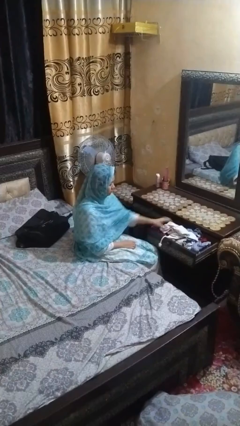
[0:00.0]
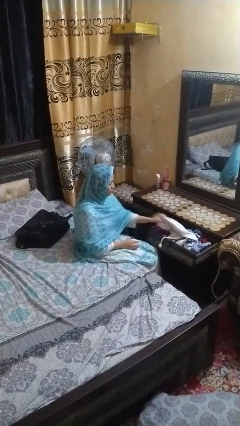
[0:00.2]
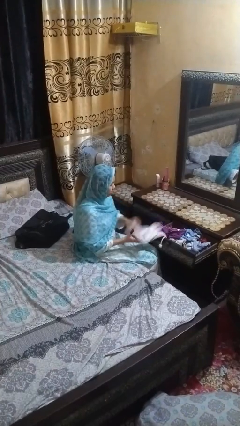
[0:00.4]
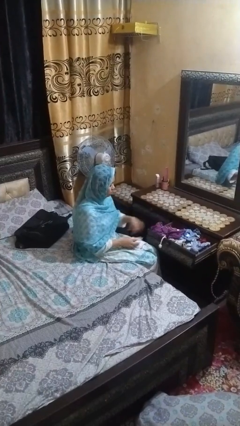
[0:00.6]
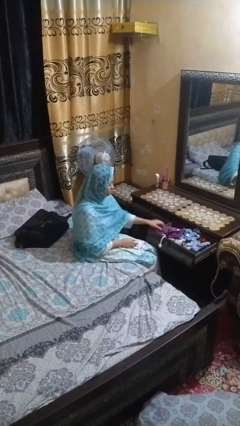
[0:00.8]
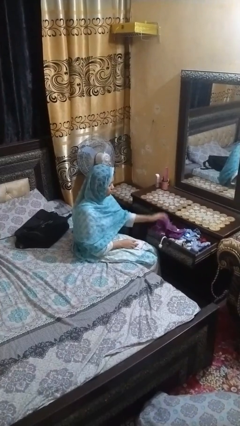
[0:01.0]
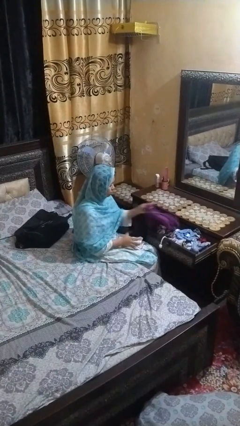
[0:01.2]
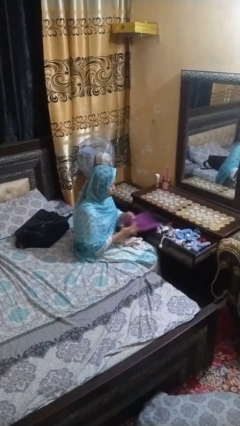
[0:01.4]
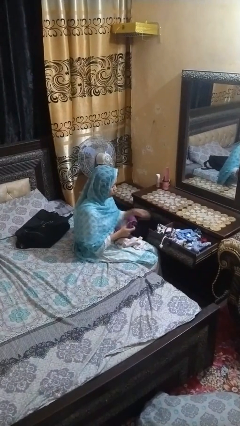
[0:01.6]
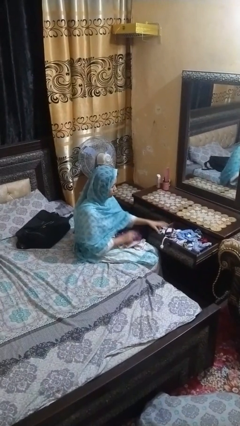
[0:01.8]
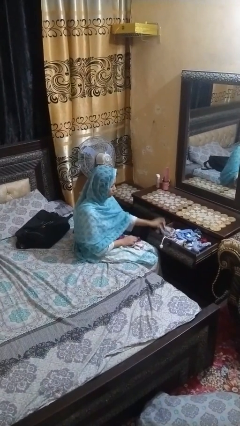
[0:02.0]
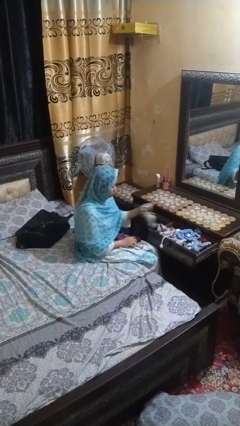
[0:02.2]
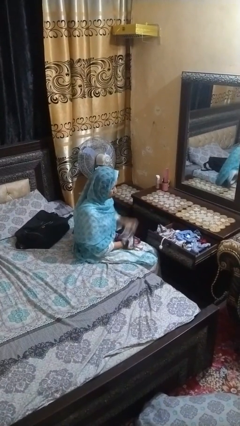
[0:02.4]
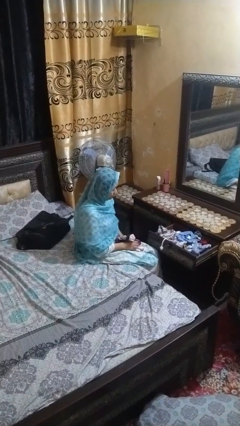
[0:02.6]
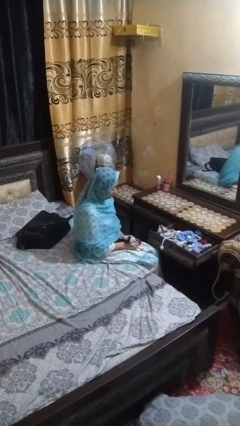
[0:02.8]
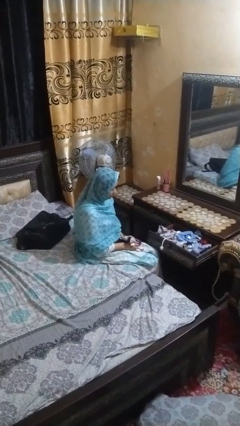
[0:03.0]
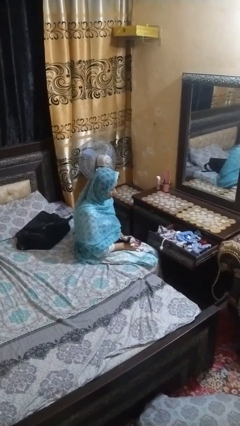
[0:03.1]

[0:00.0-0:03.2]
person takes clothes from dresser

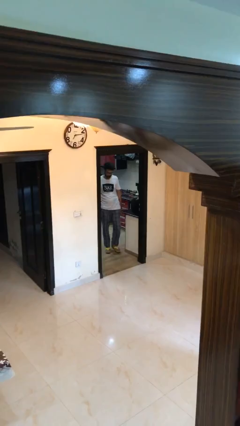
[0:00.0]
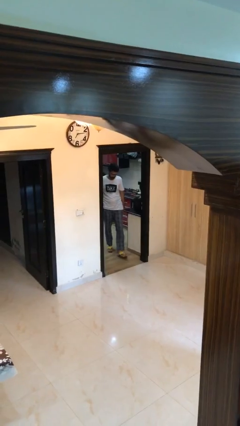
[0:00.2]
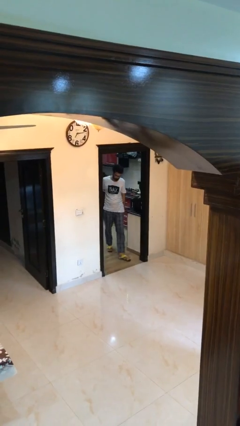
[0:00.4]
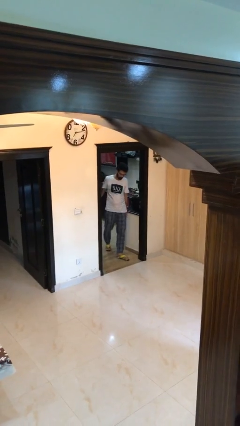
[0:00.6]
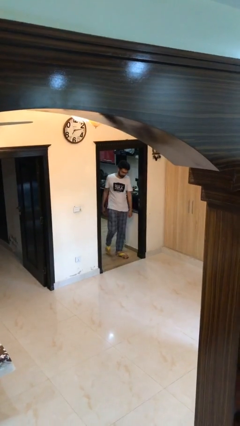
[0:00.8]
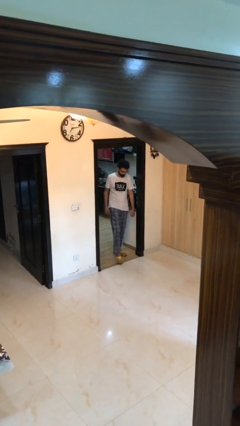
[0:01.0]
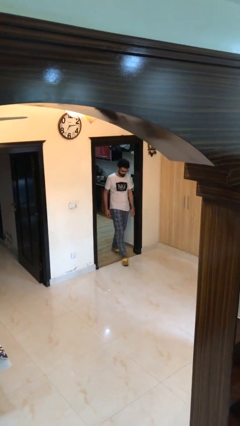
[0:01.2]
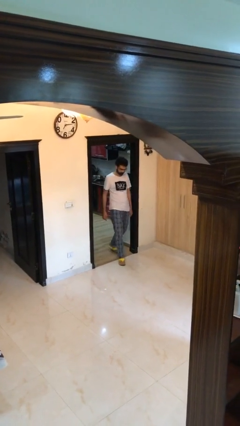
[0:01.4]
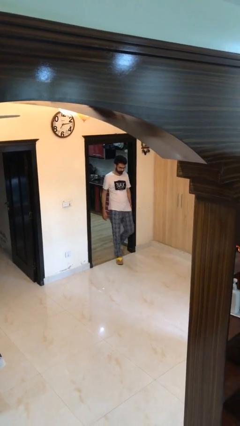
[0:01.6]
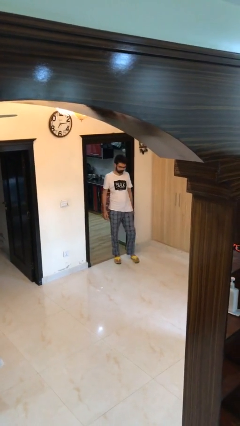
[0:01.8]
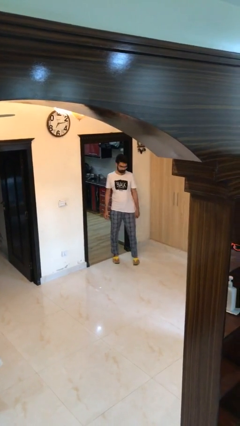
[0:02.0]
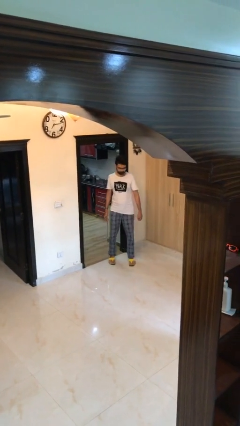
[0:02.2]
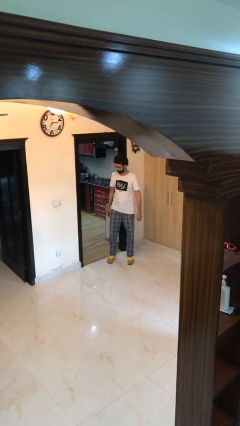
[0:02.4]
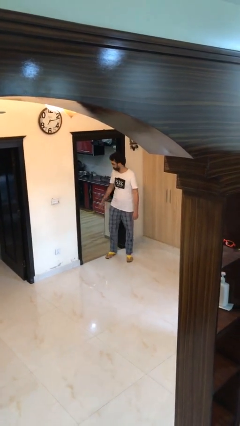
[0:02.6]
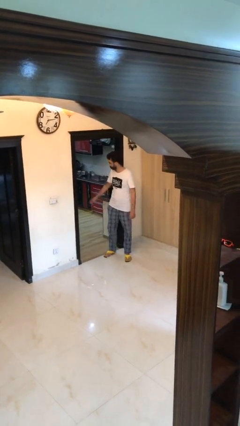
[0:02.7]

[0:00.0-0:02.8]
person enters scene through structure

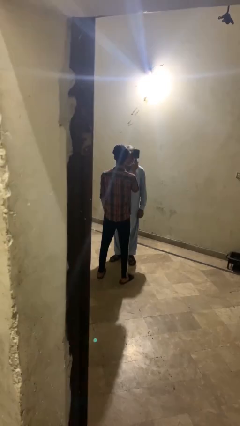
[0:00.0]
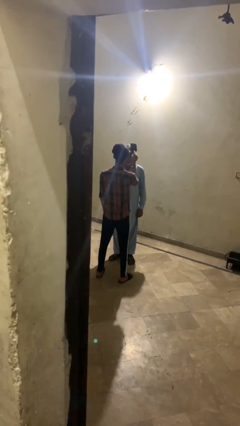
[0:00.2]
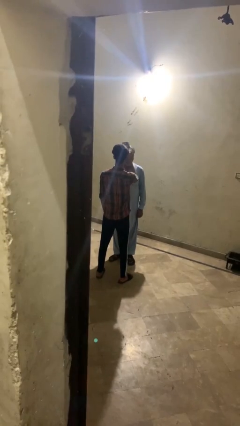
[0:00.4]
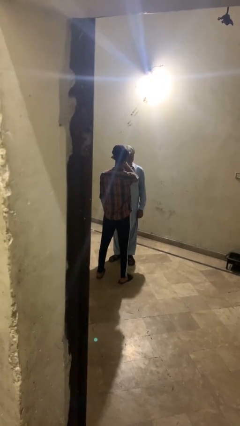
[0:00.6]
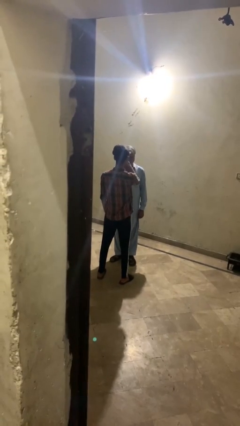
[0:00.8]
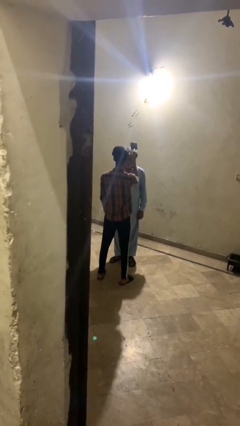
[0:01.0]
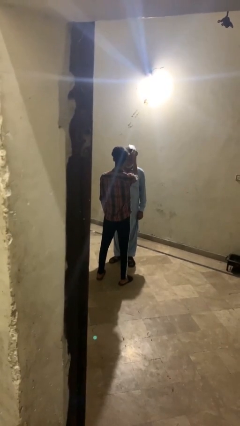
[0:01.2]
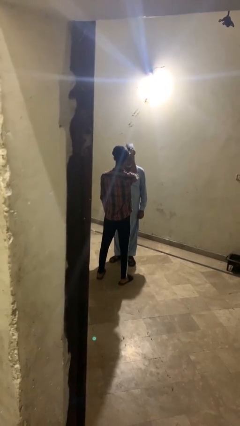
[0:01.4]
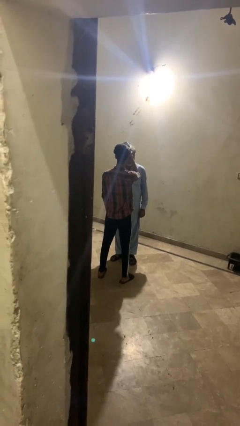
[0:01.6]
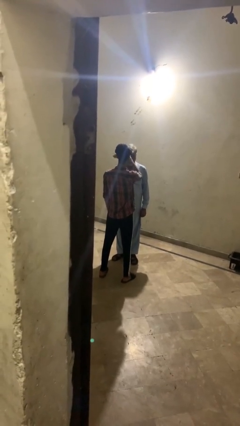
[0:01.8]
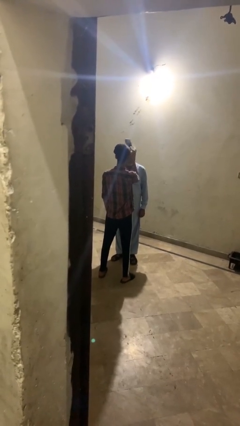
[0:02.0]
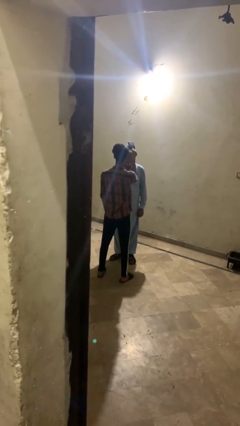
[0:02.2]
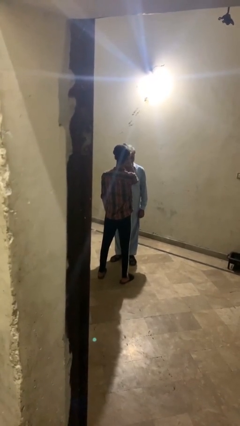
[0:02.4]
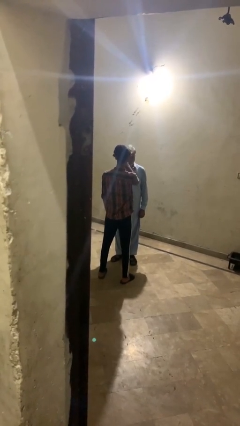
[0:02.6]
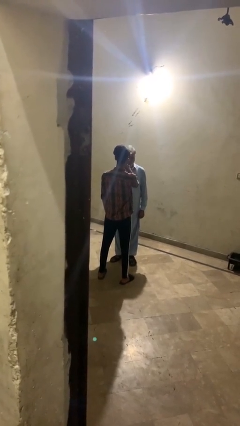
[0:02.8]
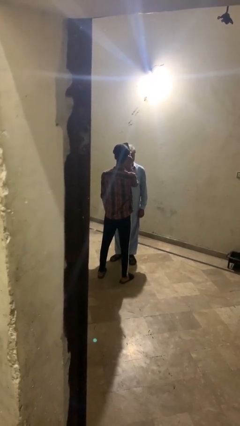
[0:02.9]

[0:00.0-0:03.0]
person brushes hair of person

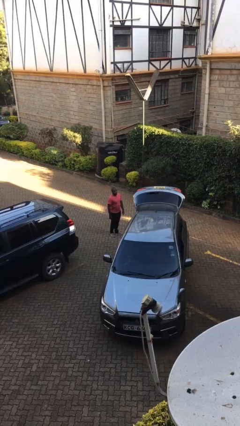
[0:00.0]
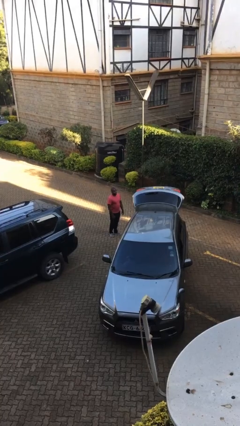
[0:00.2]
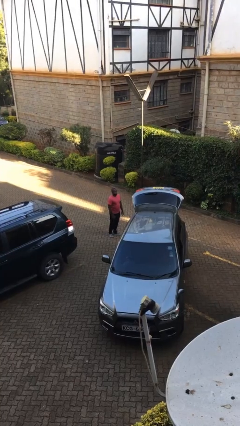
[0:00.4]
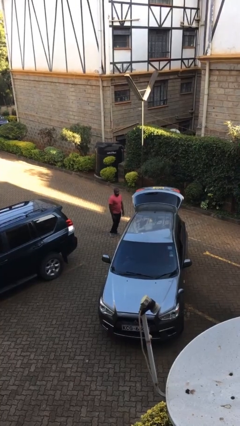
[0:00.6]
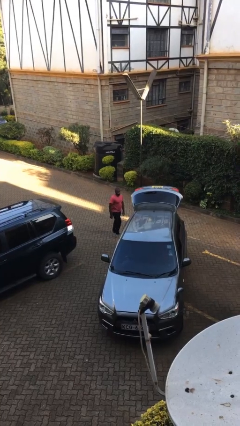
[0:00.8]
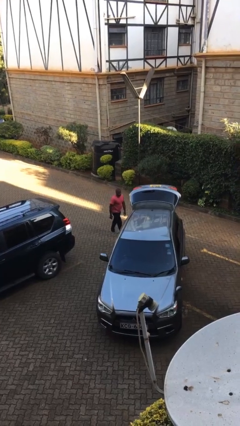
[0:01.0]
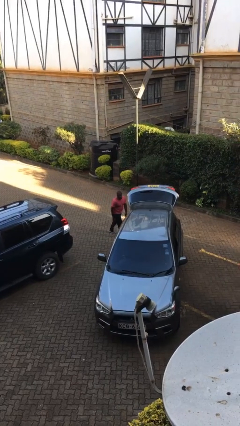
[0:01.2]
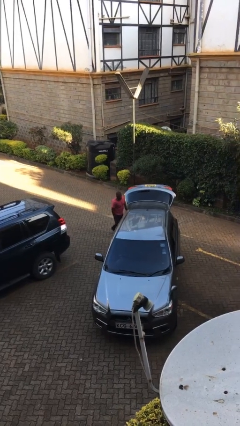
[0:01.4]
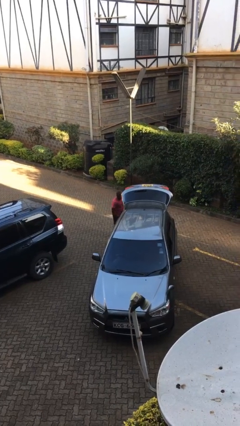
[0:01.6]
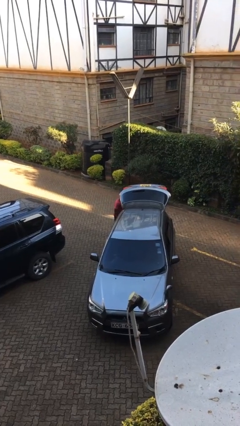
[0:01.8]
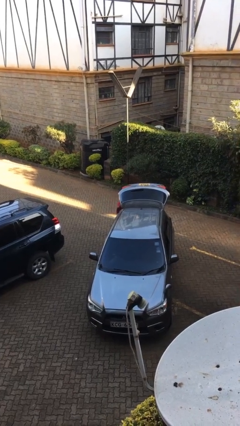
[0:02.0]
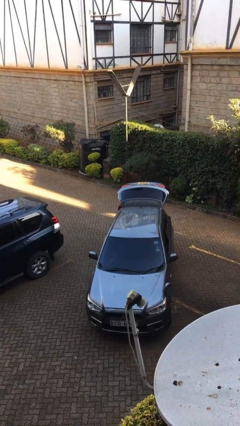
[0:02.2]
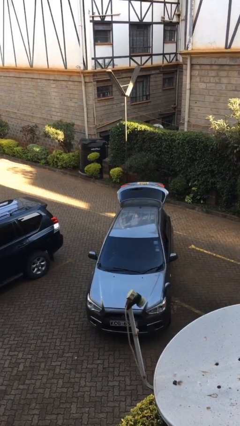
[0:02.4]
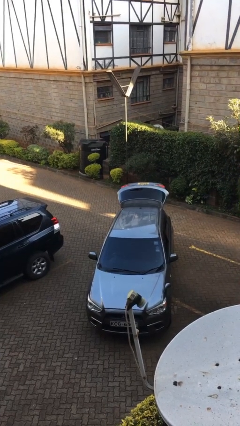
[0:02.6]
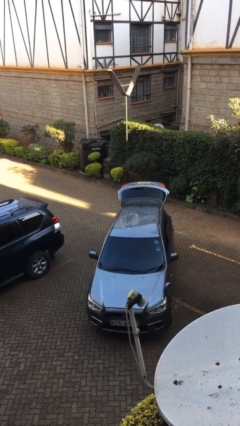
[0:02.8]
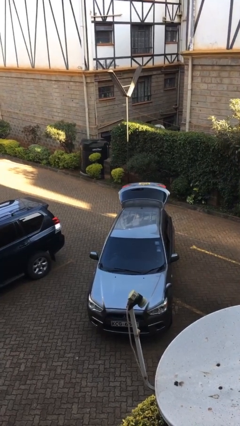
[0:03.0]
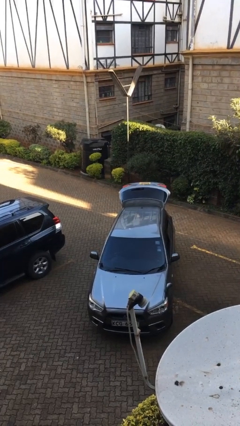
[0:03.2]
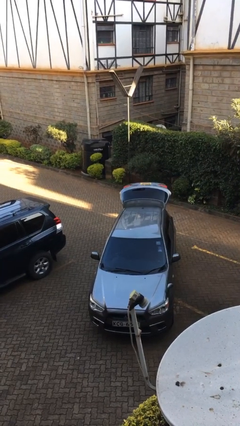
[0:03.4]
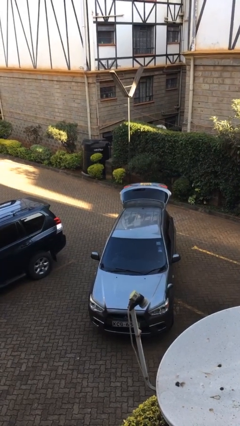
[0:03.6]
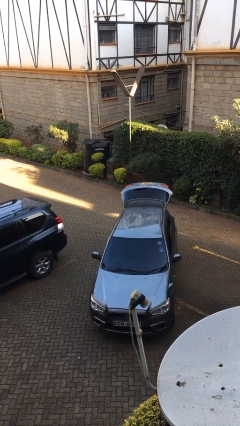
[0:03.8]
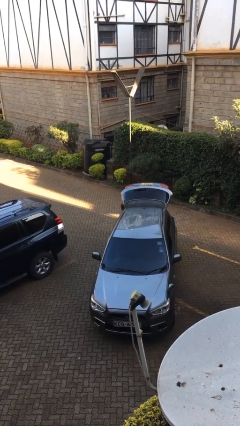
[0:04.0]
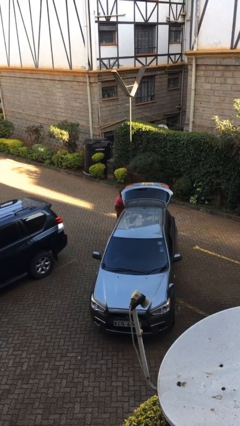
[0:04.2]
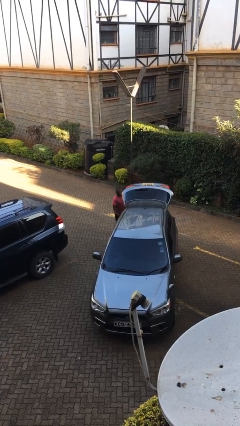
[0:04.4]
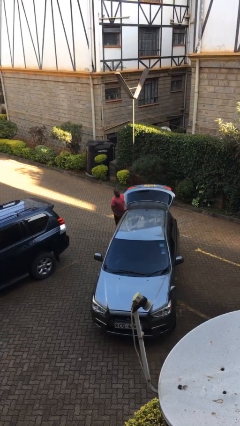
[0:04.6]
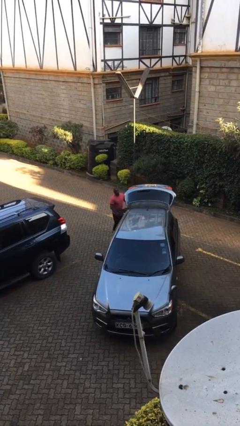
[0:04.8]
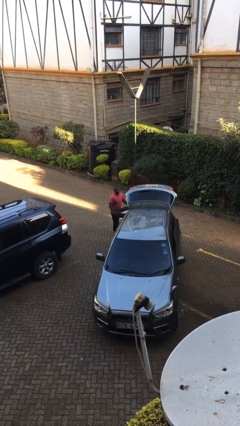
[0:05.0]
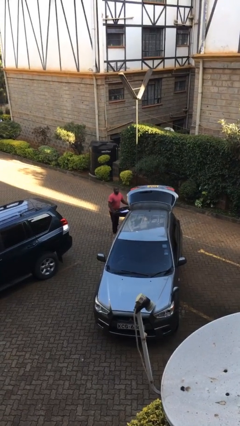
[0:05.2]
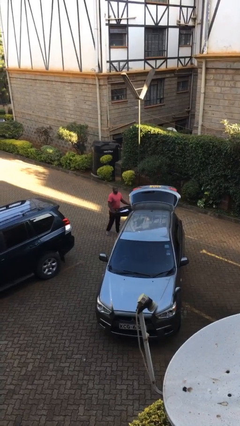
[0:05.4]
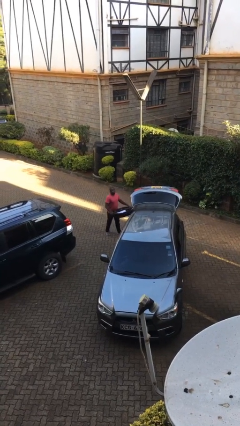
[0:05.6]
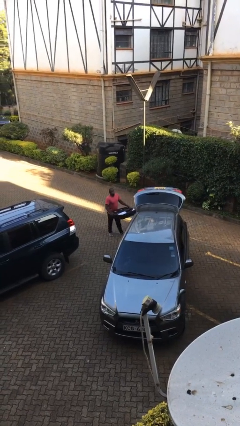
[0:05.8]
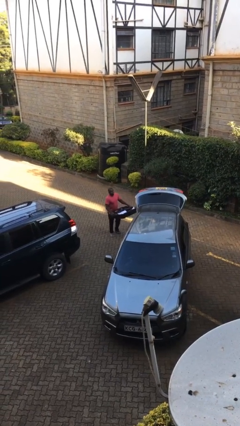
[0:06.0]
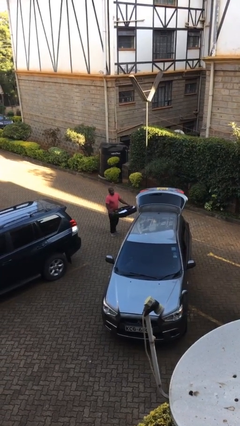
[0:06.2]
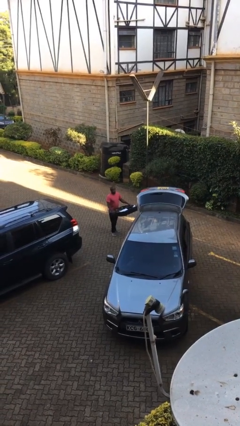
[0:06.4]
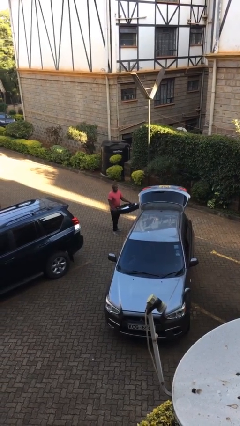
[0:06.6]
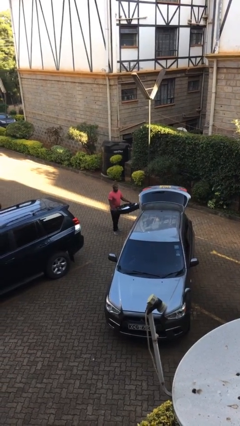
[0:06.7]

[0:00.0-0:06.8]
person unloads car

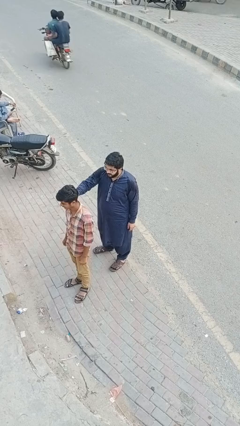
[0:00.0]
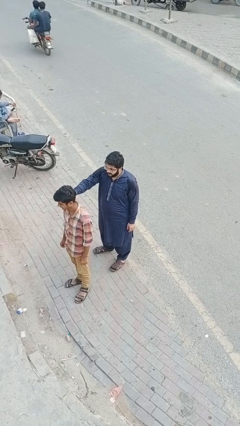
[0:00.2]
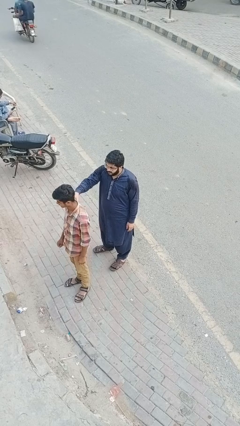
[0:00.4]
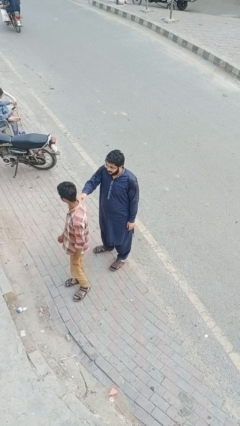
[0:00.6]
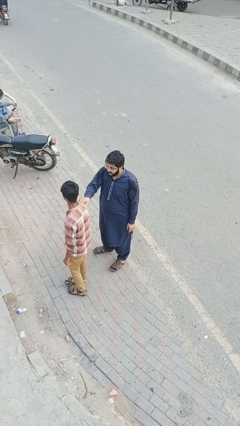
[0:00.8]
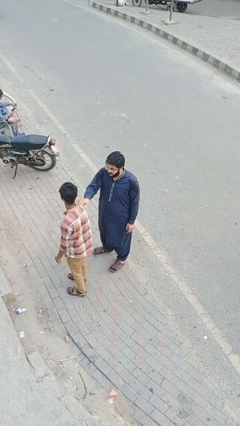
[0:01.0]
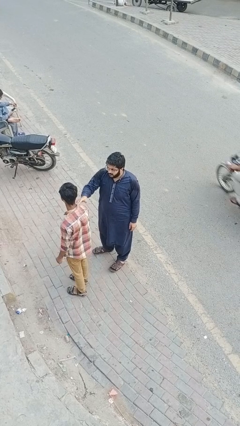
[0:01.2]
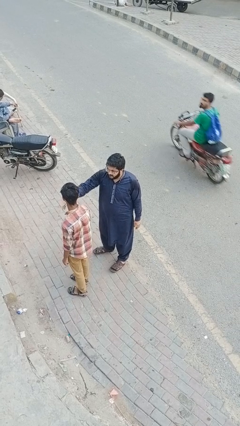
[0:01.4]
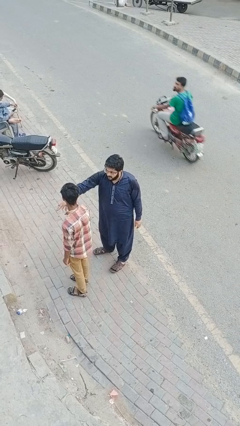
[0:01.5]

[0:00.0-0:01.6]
person grabs person by shoulder
